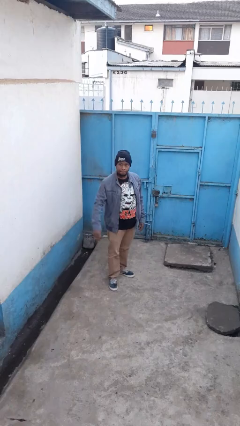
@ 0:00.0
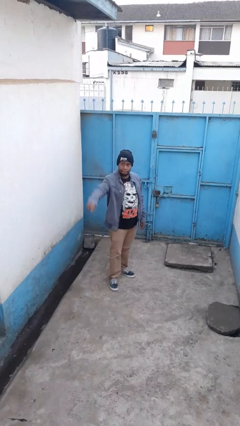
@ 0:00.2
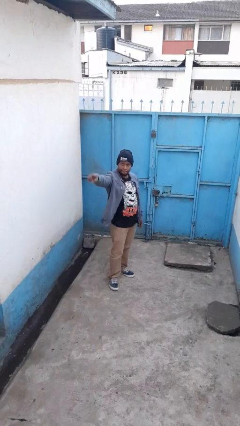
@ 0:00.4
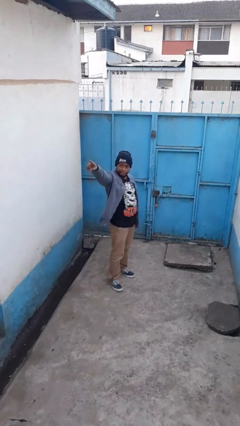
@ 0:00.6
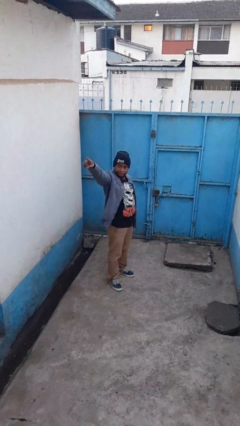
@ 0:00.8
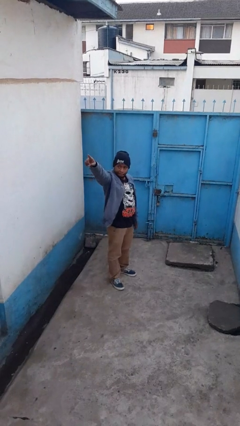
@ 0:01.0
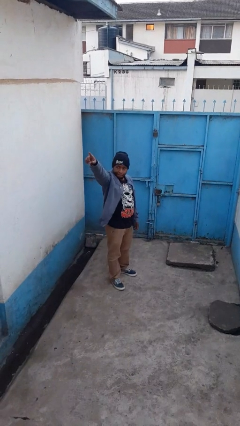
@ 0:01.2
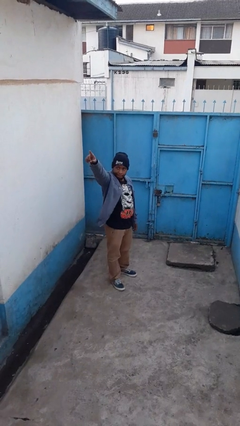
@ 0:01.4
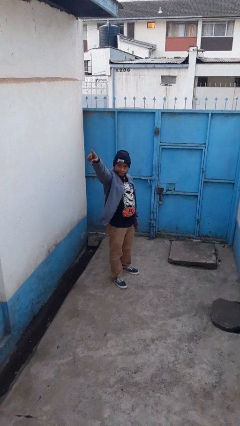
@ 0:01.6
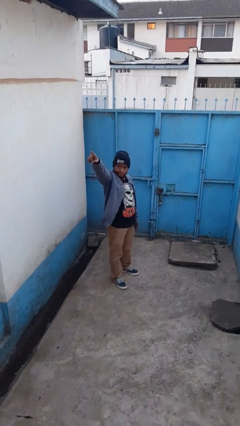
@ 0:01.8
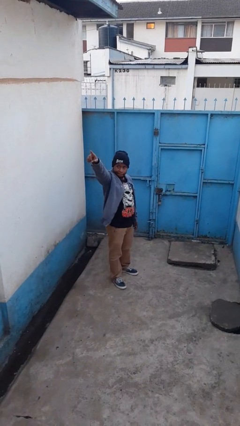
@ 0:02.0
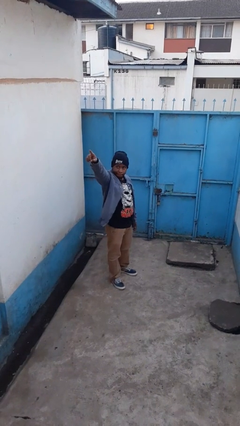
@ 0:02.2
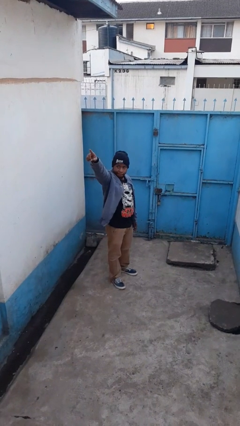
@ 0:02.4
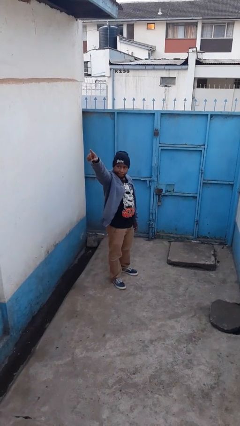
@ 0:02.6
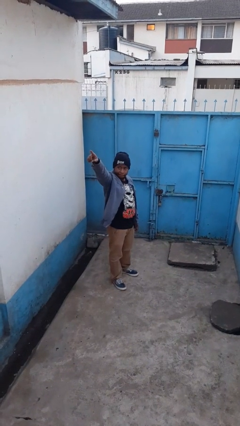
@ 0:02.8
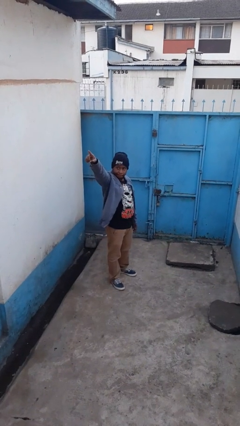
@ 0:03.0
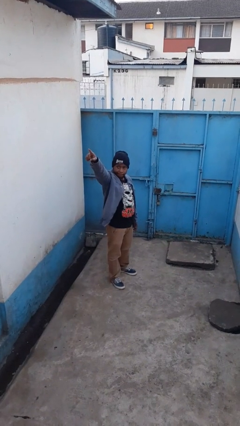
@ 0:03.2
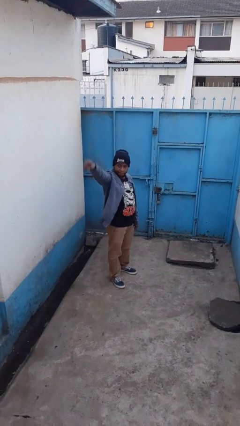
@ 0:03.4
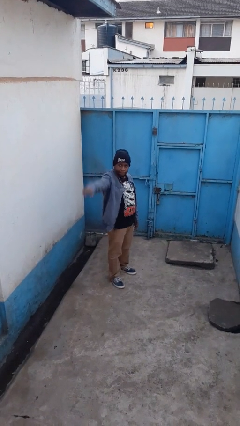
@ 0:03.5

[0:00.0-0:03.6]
person points at person

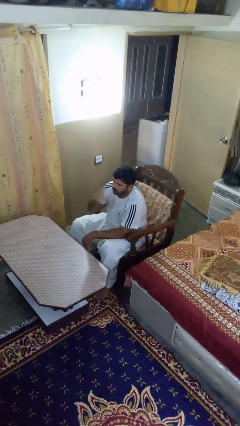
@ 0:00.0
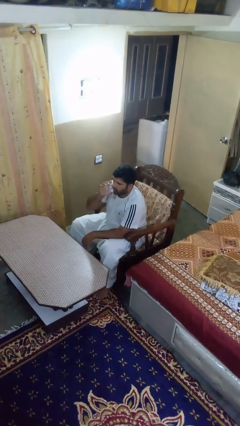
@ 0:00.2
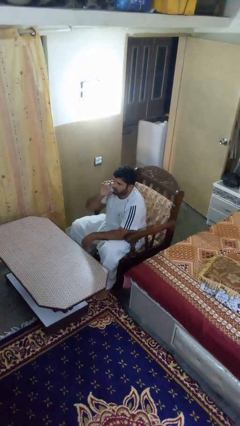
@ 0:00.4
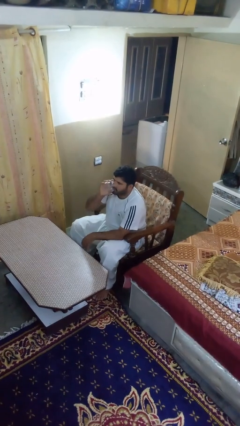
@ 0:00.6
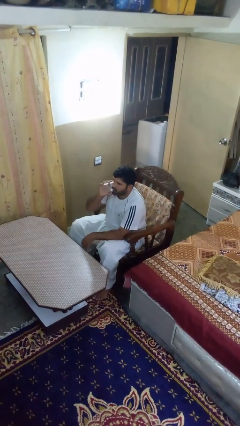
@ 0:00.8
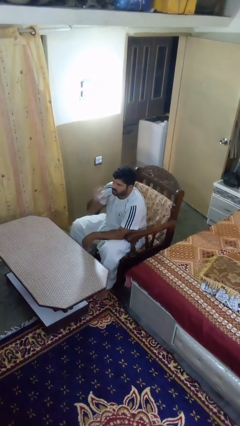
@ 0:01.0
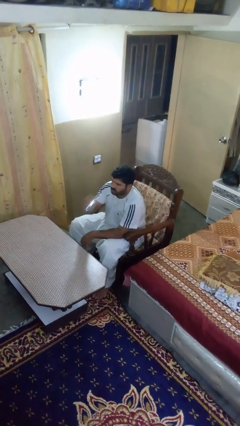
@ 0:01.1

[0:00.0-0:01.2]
person drinks from shotglass

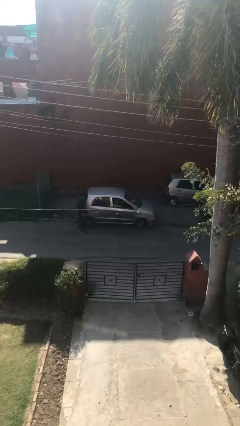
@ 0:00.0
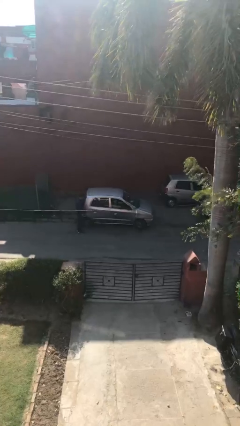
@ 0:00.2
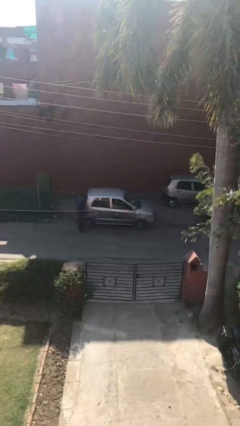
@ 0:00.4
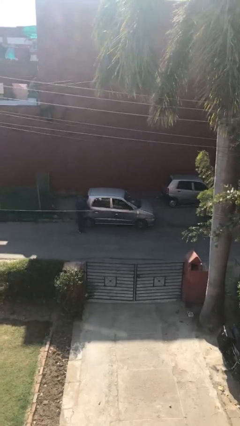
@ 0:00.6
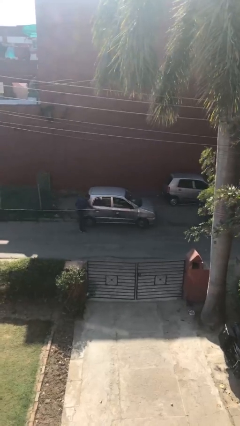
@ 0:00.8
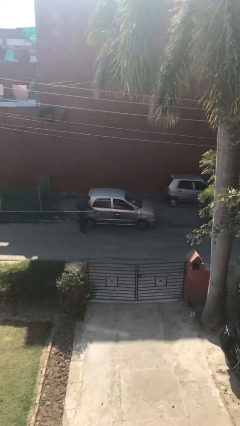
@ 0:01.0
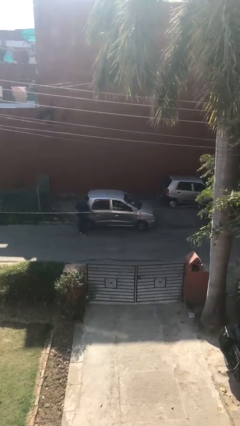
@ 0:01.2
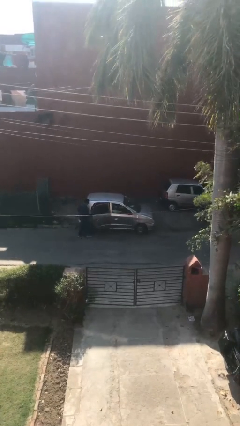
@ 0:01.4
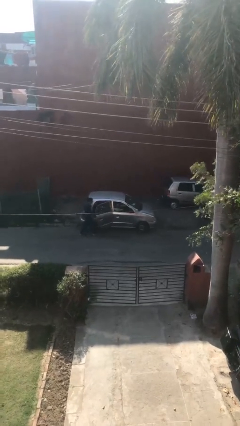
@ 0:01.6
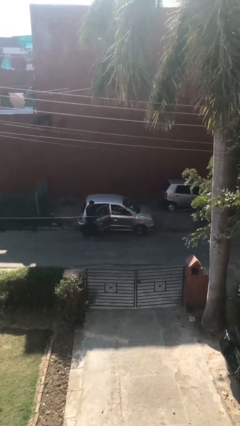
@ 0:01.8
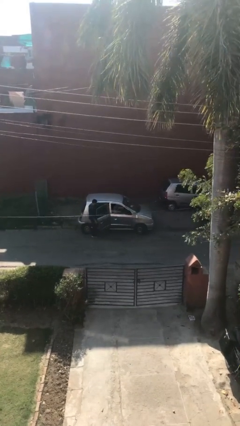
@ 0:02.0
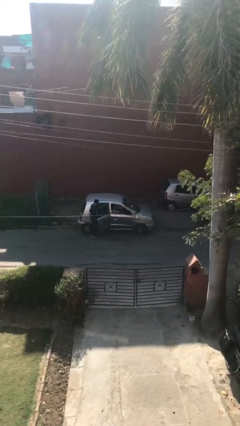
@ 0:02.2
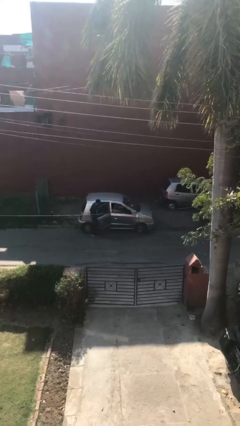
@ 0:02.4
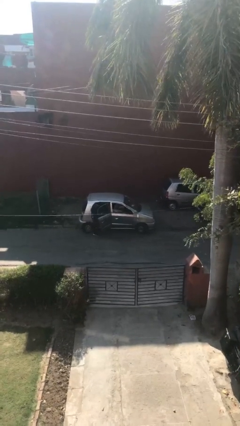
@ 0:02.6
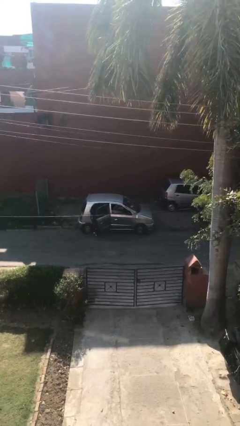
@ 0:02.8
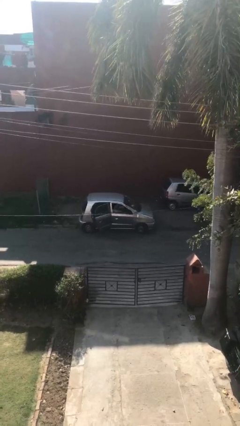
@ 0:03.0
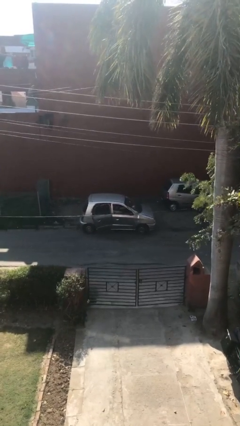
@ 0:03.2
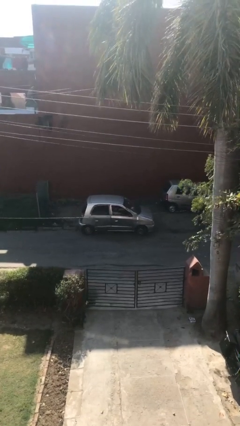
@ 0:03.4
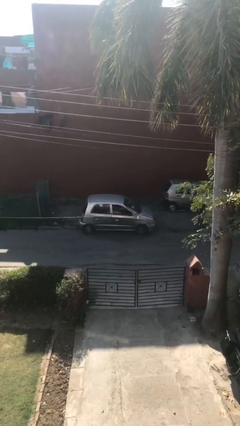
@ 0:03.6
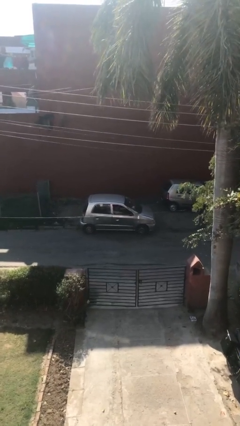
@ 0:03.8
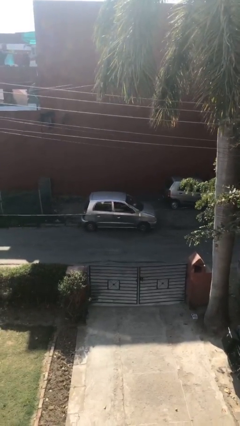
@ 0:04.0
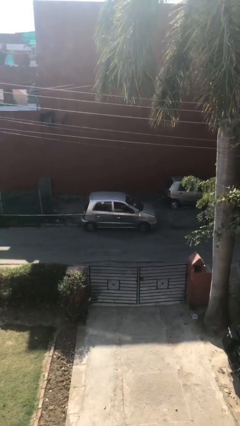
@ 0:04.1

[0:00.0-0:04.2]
car picks up person

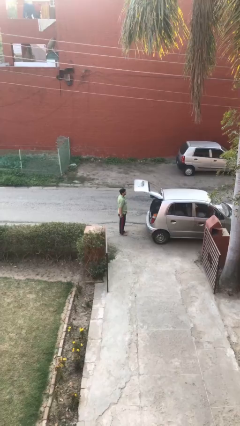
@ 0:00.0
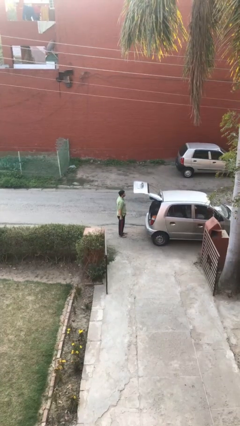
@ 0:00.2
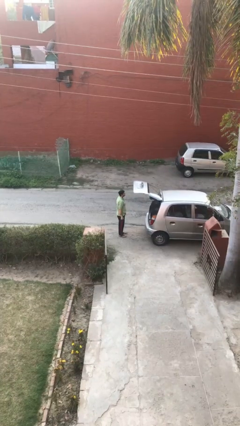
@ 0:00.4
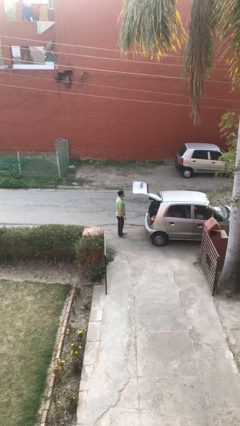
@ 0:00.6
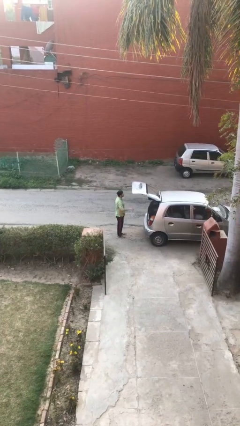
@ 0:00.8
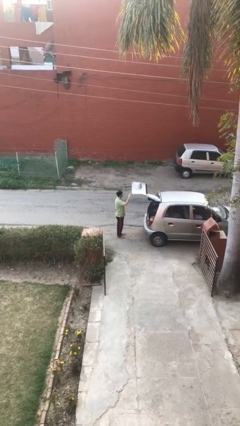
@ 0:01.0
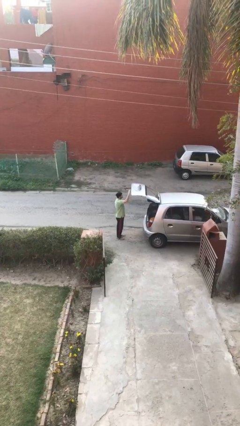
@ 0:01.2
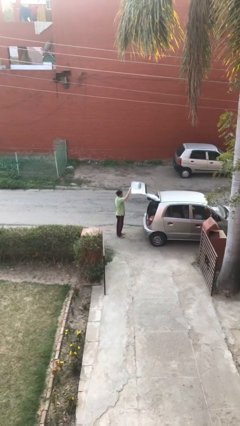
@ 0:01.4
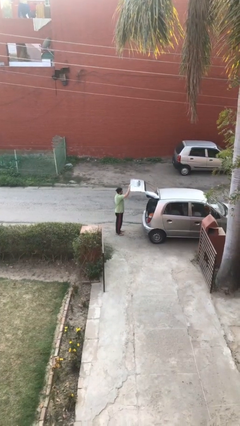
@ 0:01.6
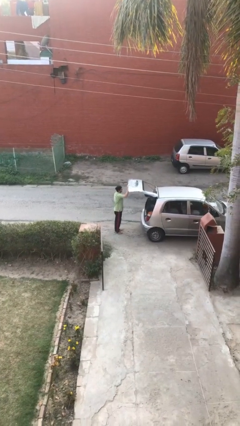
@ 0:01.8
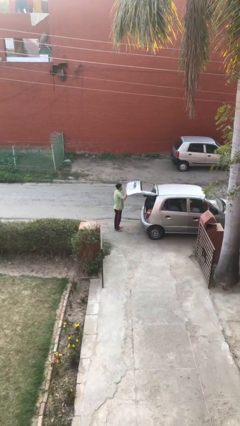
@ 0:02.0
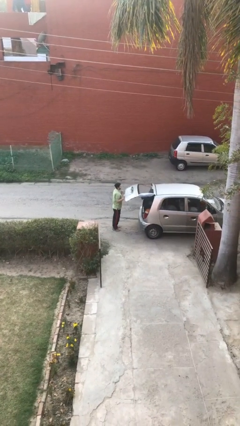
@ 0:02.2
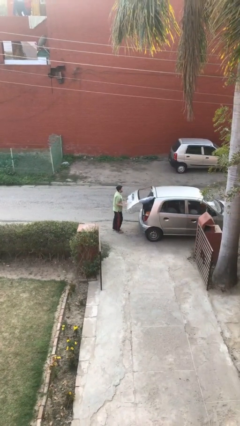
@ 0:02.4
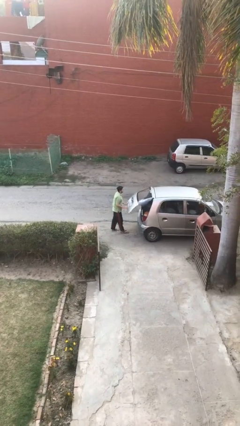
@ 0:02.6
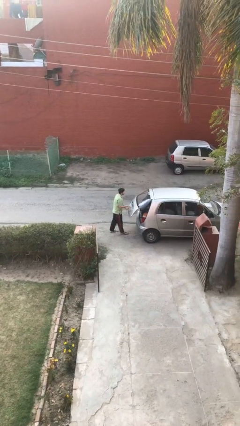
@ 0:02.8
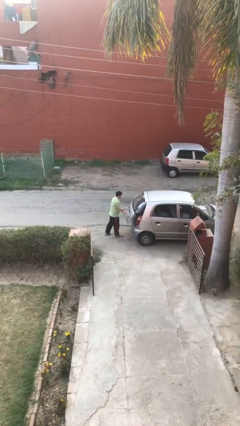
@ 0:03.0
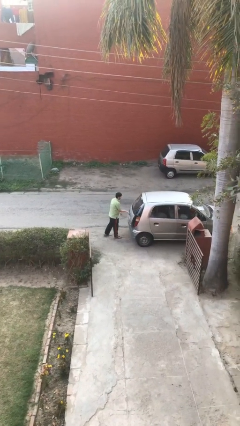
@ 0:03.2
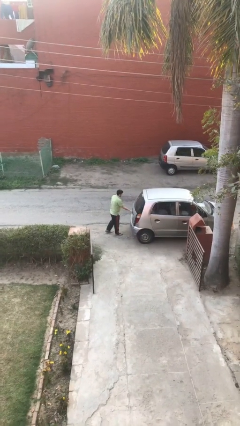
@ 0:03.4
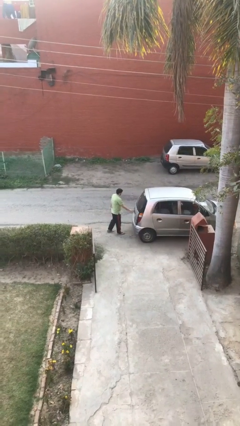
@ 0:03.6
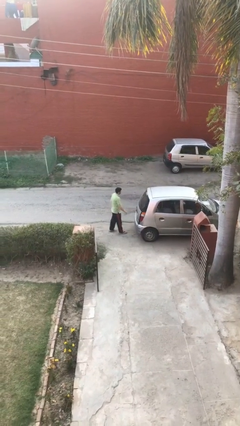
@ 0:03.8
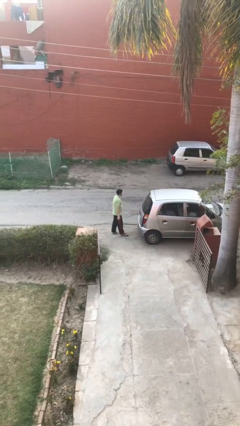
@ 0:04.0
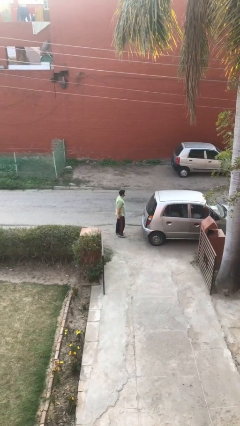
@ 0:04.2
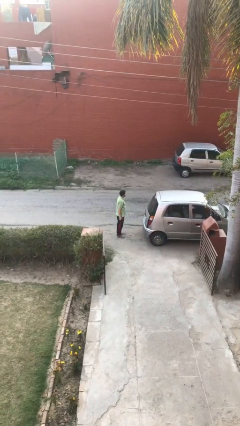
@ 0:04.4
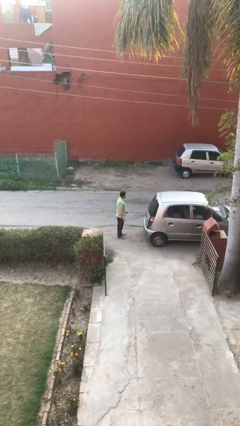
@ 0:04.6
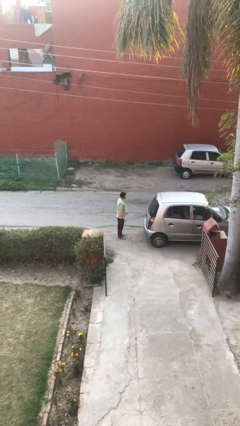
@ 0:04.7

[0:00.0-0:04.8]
person closes car trunk

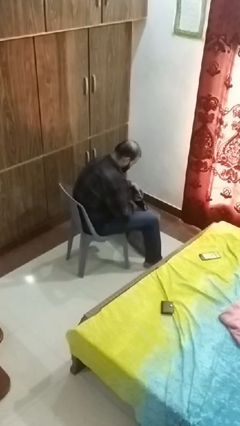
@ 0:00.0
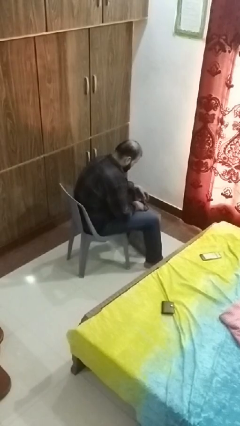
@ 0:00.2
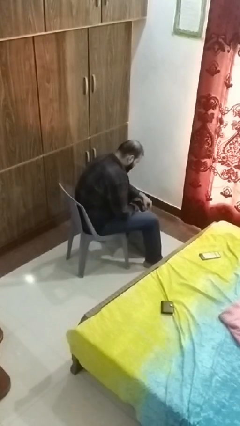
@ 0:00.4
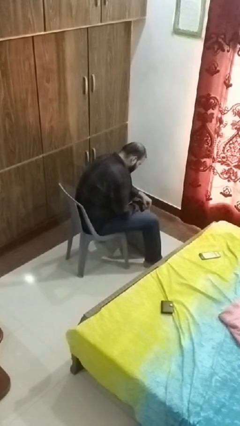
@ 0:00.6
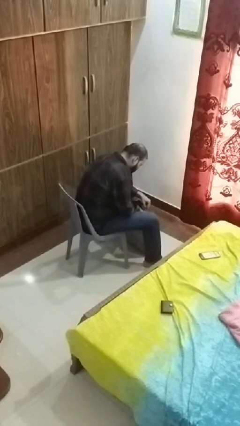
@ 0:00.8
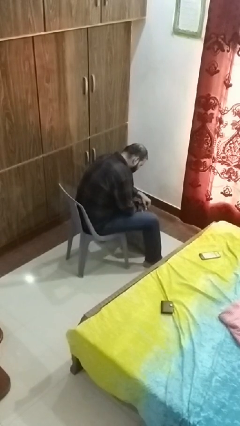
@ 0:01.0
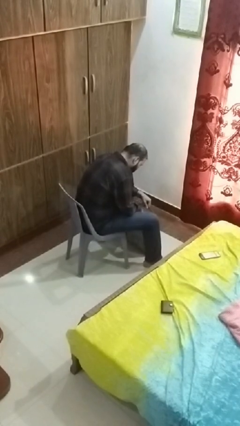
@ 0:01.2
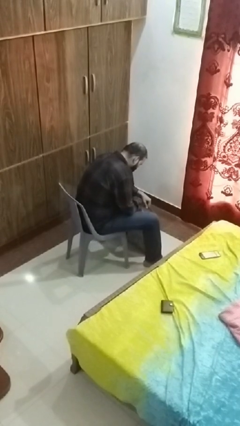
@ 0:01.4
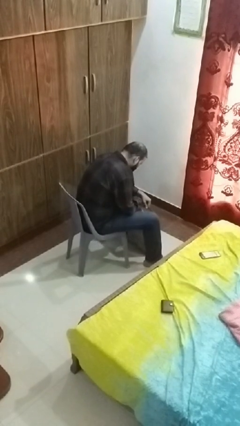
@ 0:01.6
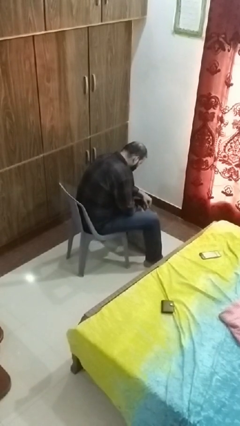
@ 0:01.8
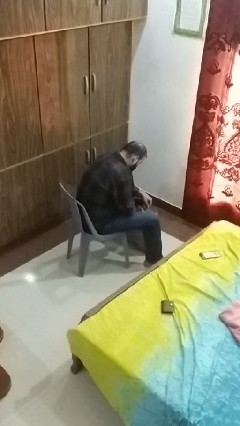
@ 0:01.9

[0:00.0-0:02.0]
person searches in bag

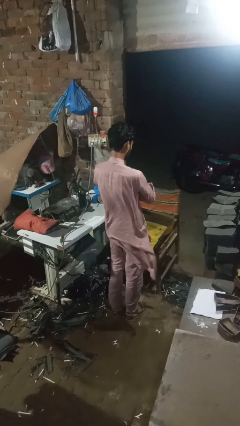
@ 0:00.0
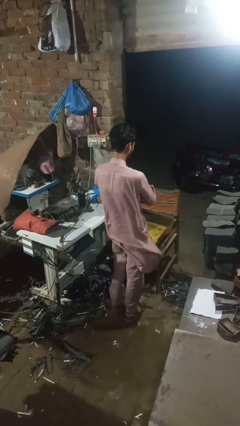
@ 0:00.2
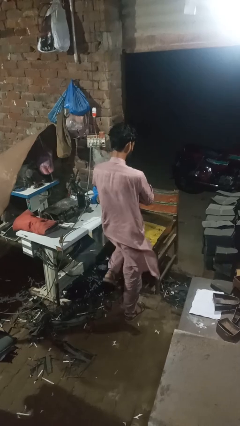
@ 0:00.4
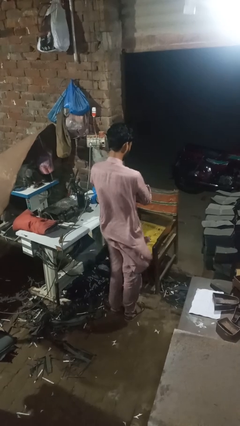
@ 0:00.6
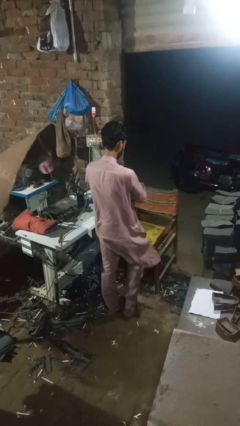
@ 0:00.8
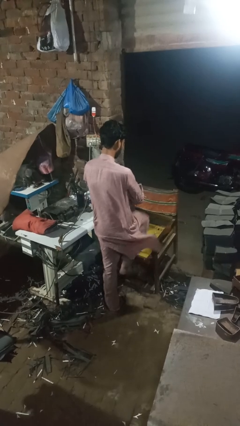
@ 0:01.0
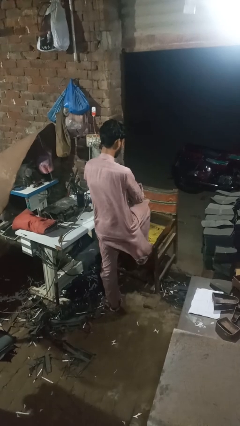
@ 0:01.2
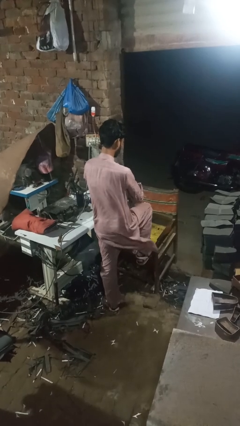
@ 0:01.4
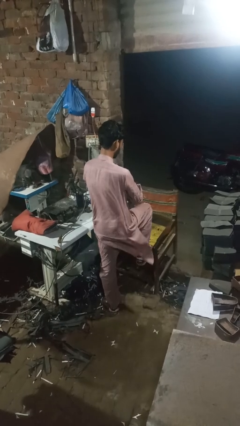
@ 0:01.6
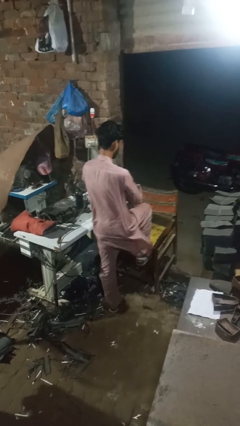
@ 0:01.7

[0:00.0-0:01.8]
person stubs toe
